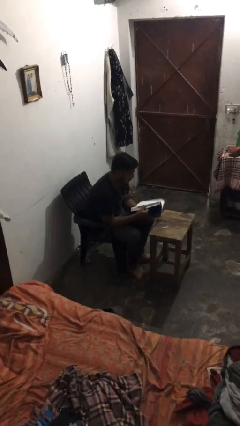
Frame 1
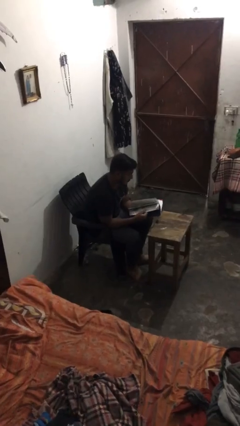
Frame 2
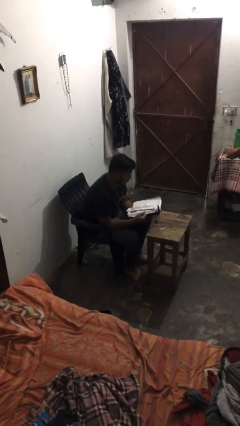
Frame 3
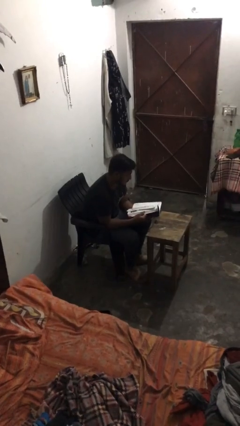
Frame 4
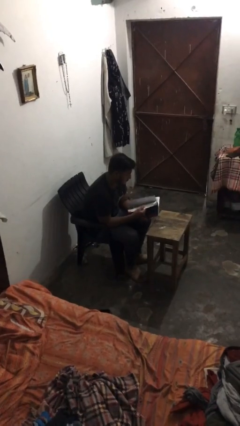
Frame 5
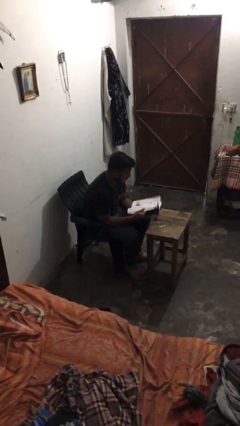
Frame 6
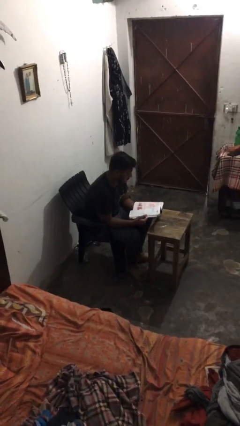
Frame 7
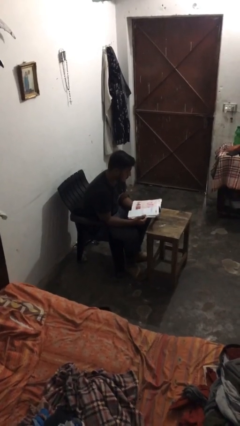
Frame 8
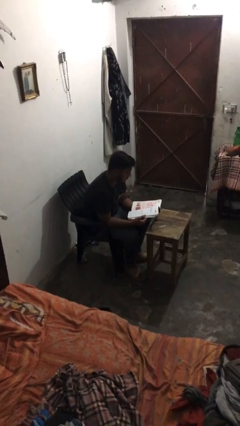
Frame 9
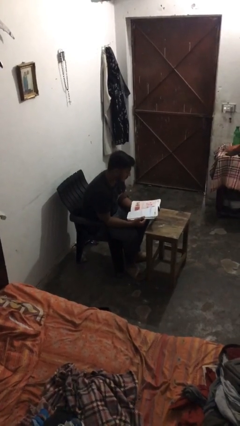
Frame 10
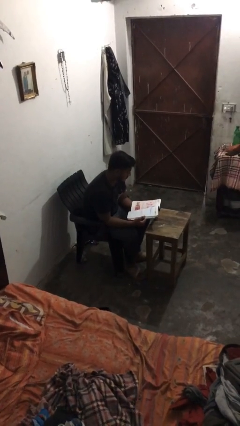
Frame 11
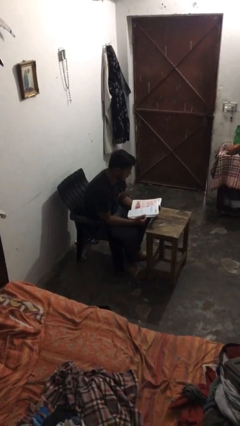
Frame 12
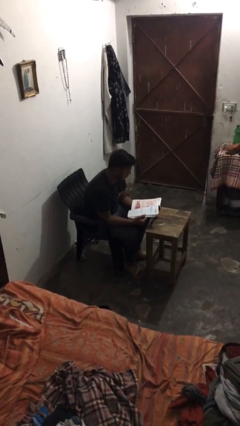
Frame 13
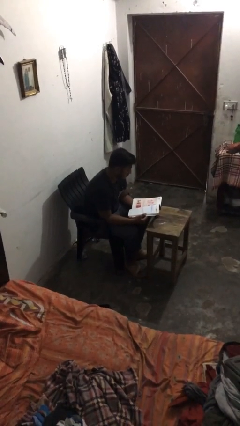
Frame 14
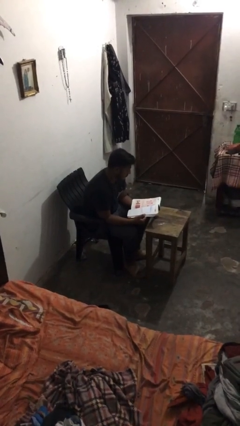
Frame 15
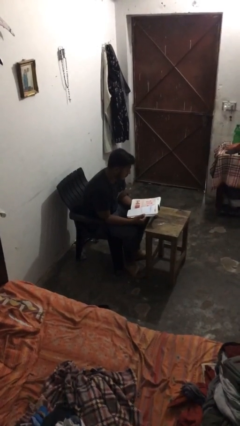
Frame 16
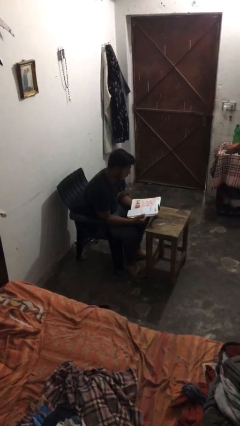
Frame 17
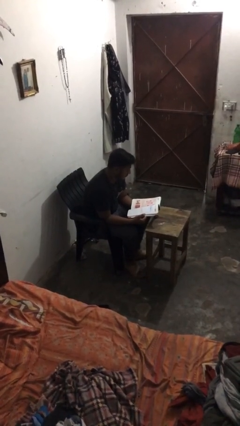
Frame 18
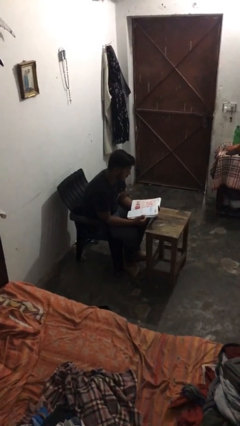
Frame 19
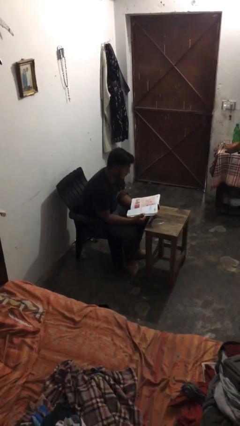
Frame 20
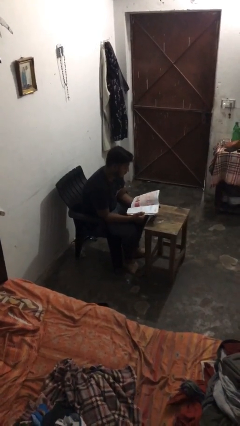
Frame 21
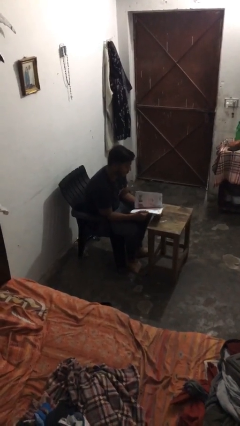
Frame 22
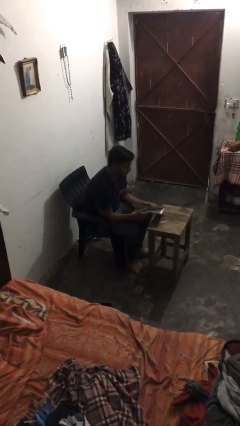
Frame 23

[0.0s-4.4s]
person reads document

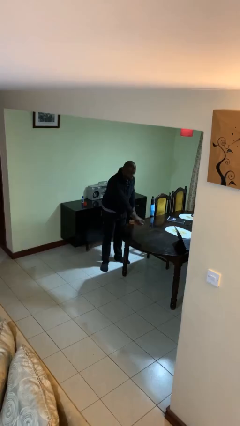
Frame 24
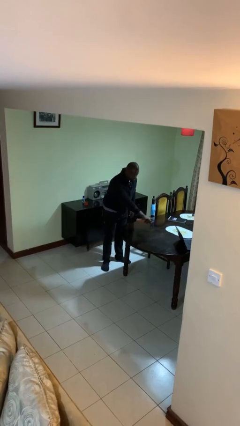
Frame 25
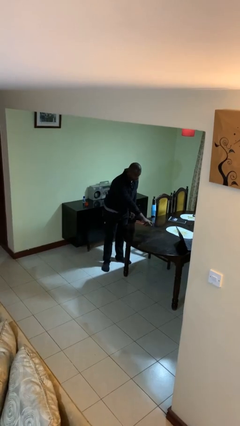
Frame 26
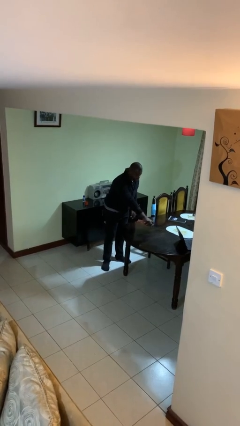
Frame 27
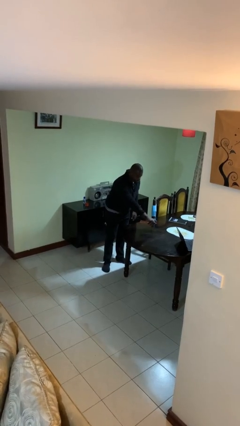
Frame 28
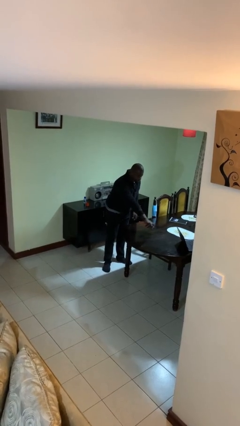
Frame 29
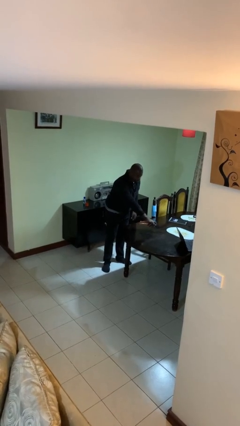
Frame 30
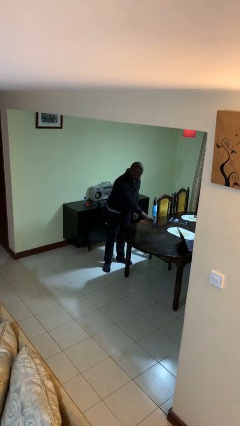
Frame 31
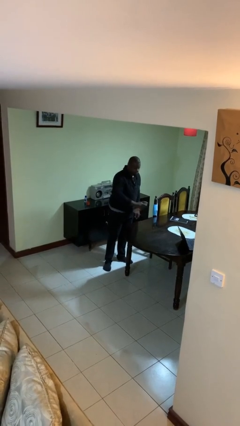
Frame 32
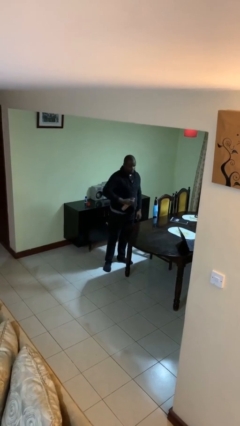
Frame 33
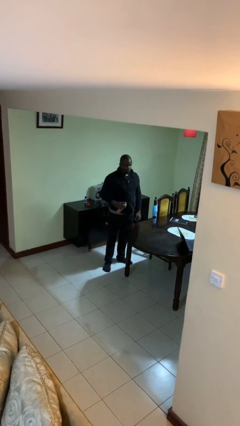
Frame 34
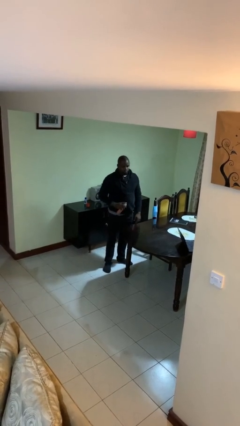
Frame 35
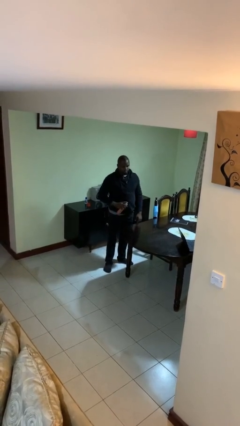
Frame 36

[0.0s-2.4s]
person sprays from bottle

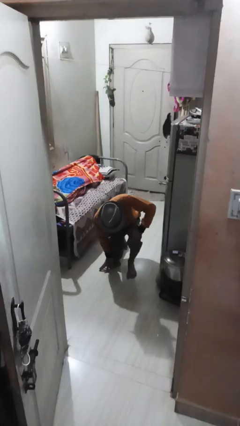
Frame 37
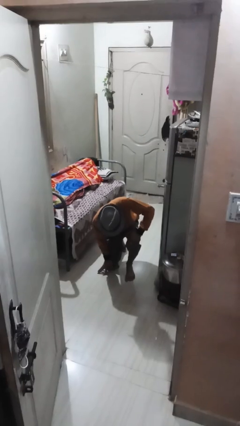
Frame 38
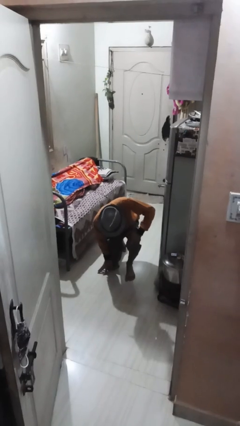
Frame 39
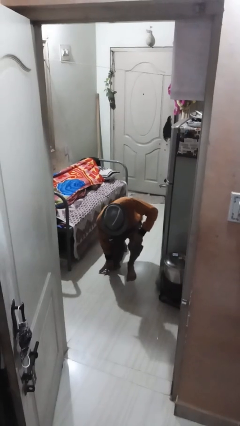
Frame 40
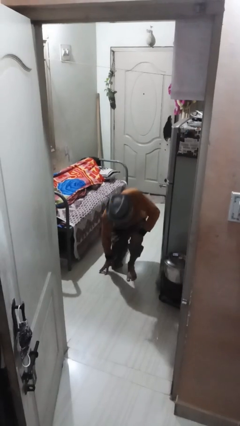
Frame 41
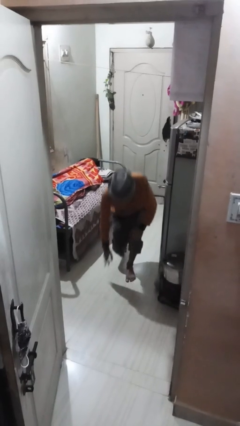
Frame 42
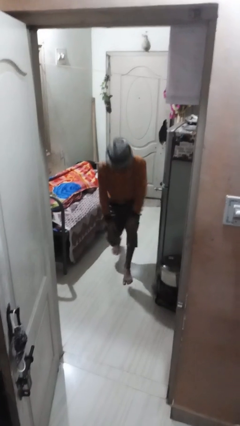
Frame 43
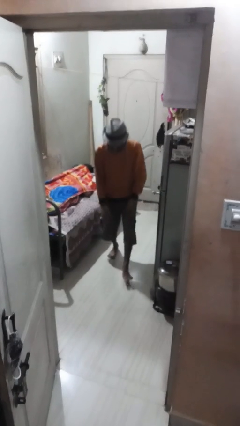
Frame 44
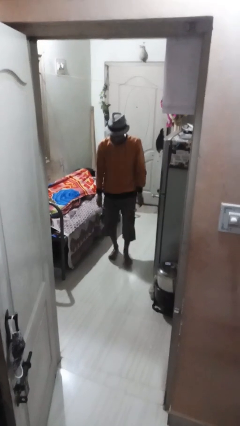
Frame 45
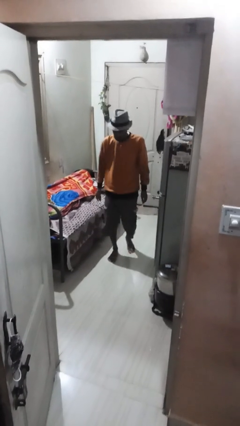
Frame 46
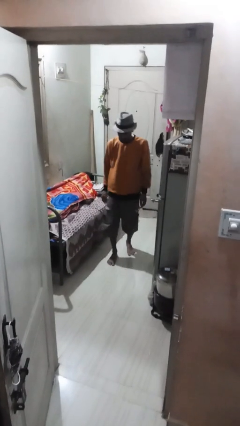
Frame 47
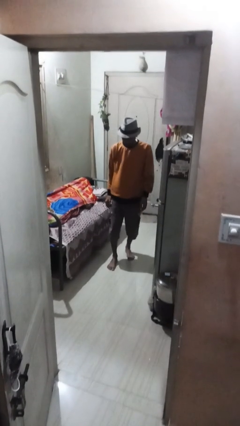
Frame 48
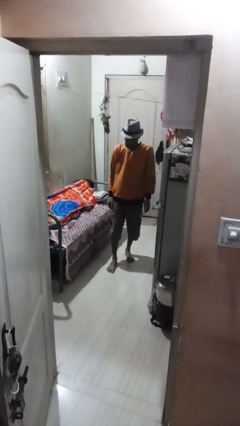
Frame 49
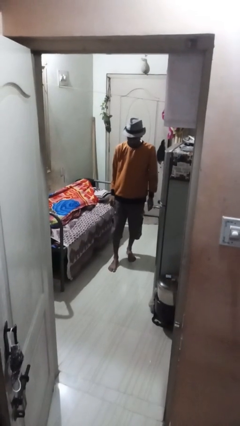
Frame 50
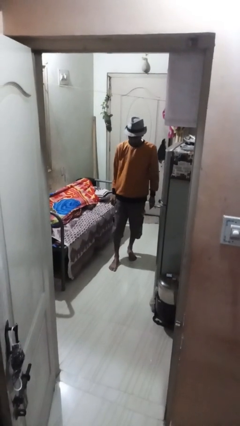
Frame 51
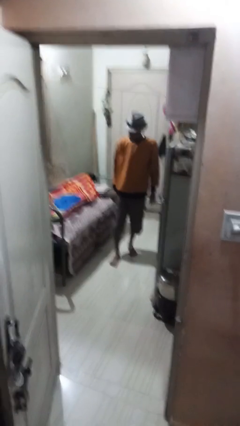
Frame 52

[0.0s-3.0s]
person stands up from floor

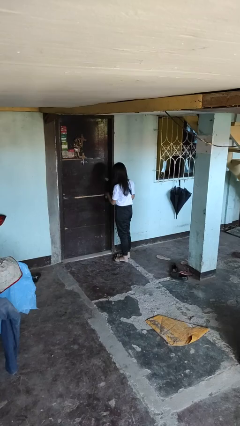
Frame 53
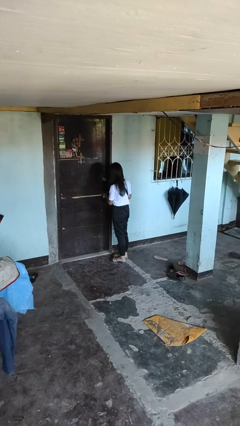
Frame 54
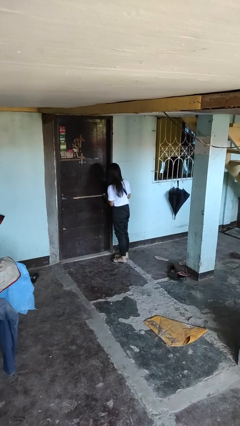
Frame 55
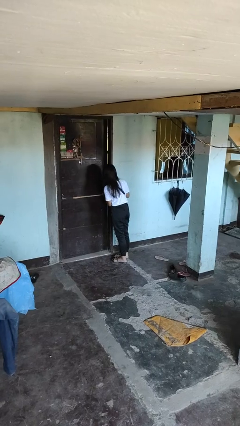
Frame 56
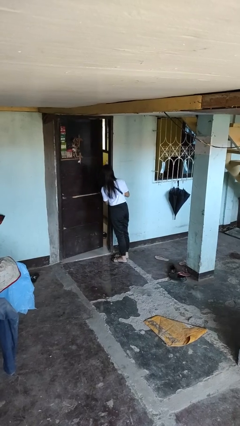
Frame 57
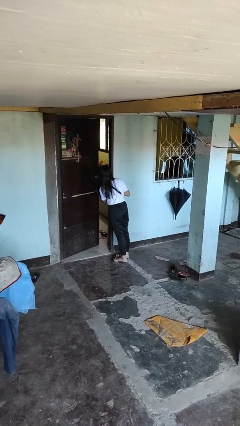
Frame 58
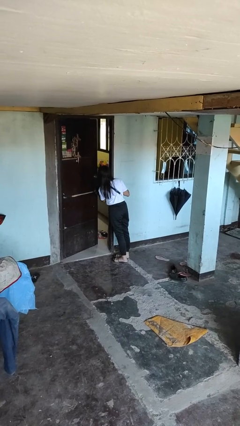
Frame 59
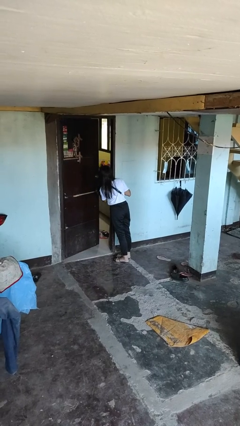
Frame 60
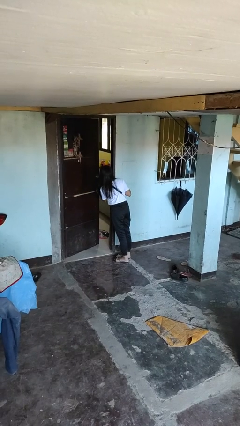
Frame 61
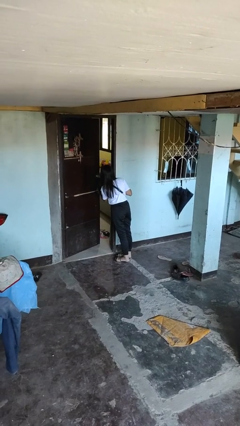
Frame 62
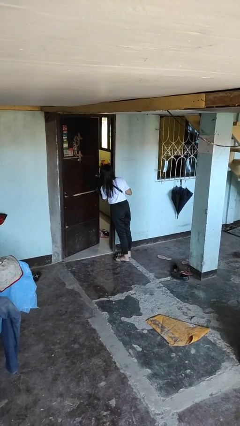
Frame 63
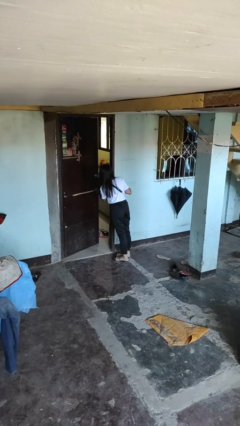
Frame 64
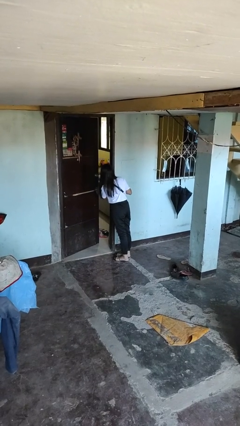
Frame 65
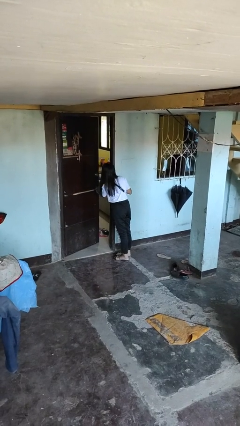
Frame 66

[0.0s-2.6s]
person opens facility door

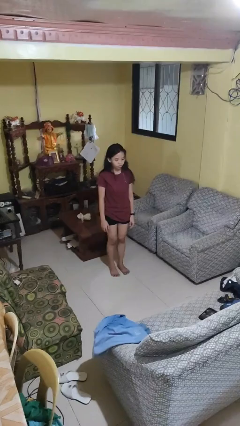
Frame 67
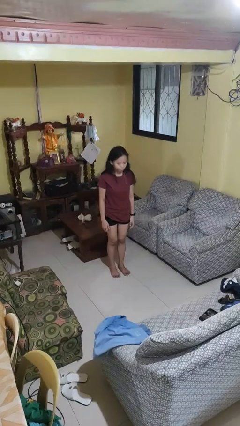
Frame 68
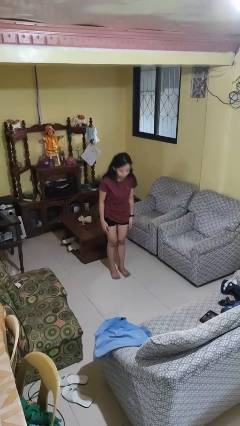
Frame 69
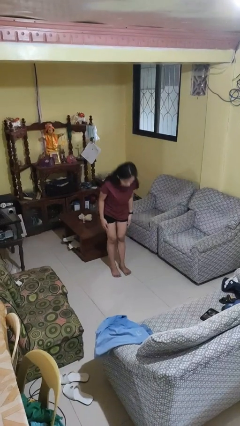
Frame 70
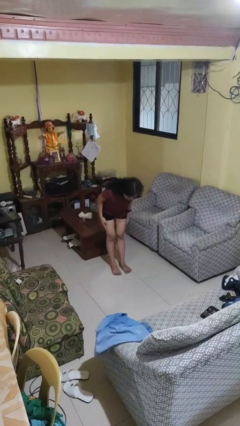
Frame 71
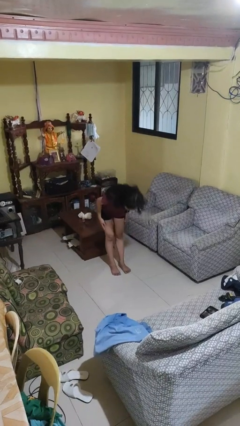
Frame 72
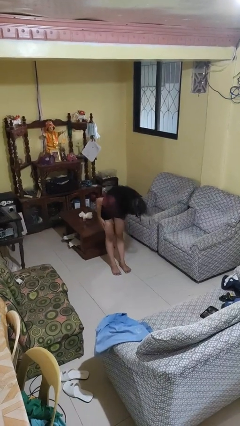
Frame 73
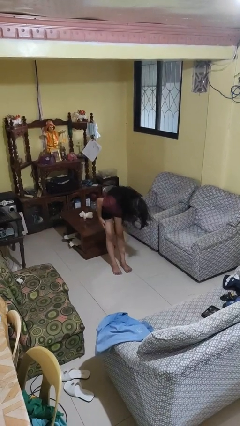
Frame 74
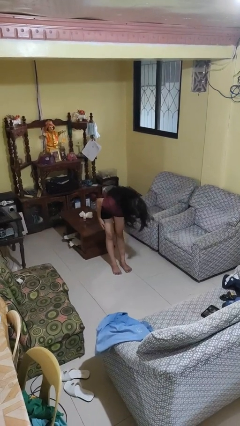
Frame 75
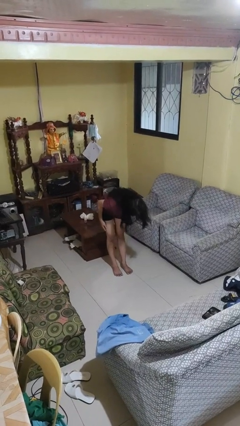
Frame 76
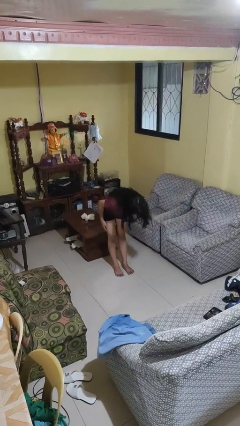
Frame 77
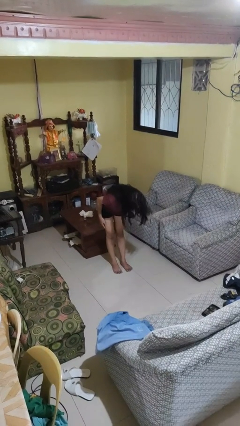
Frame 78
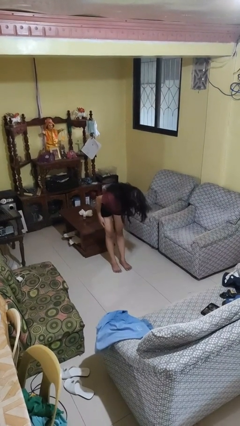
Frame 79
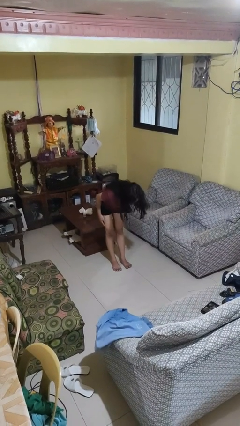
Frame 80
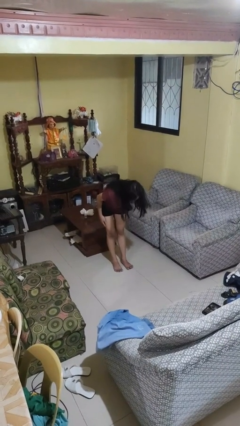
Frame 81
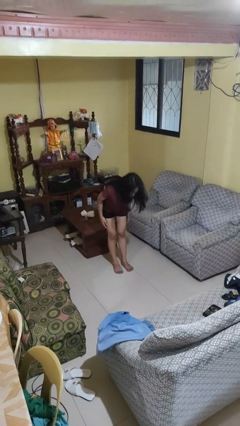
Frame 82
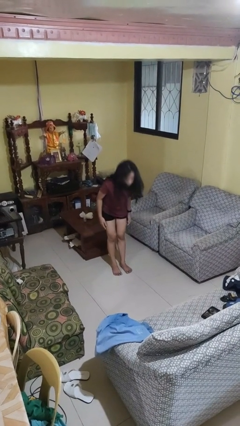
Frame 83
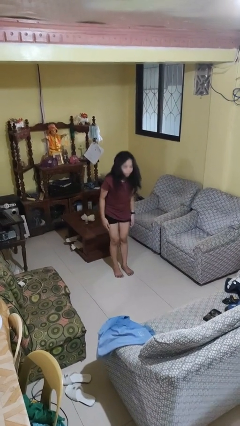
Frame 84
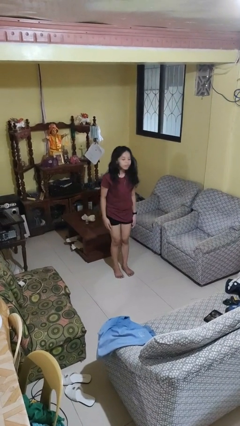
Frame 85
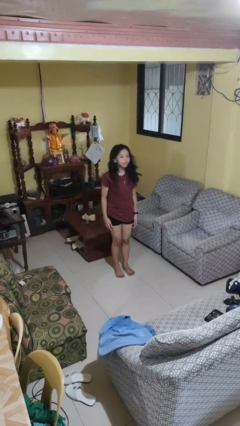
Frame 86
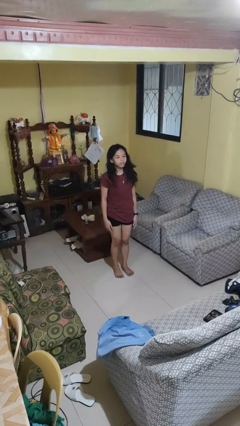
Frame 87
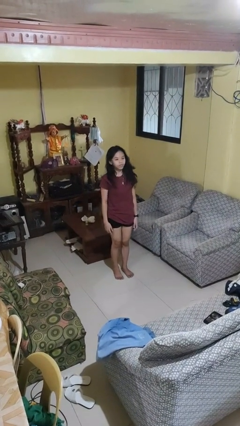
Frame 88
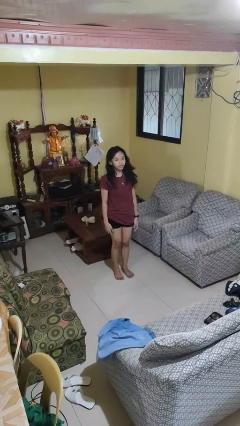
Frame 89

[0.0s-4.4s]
person bows

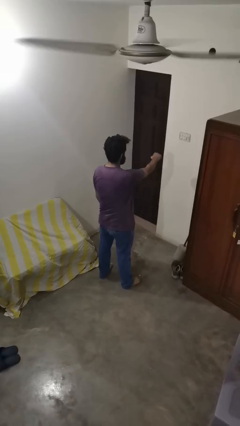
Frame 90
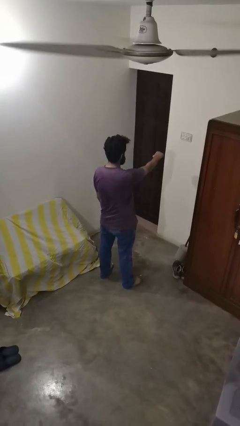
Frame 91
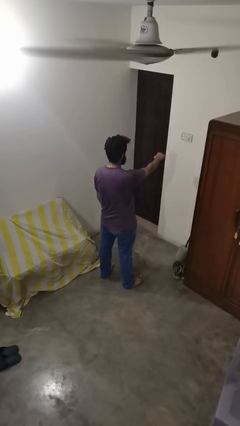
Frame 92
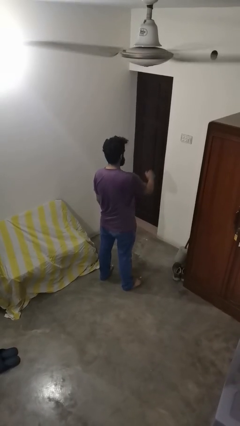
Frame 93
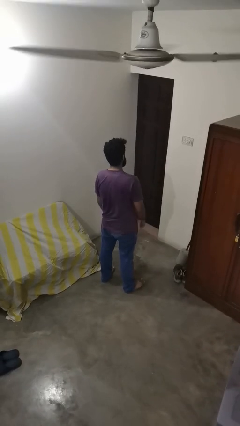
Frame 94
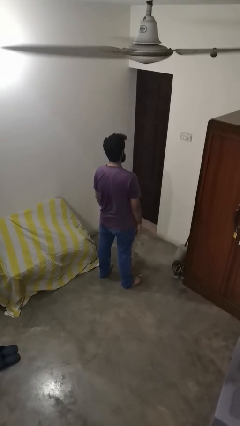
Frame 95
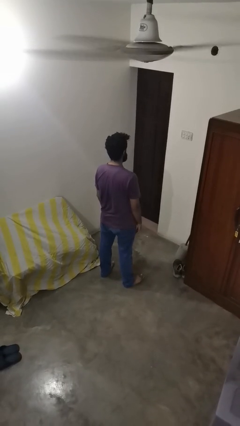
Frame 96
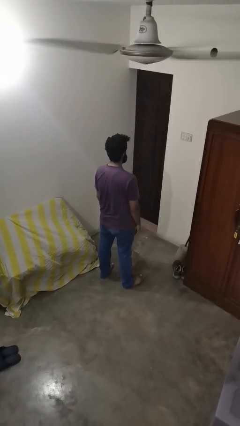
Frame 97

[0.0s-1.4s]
person punches
